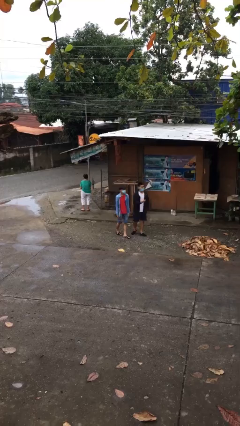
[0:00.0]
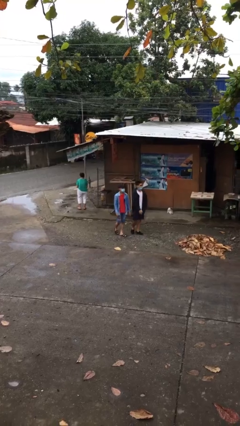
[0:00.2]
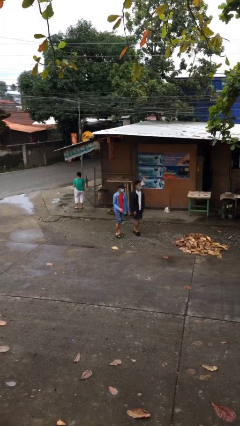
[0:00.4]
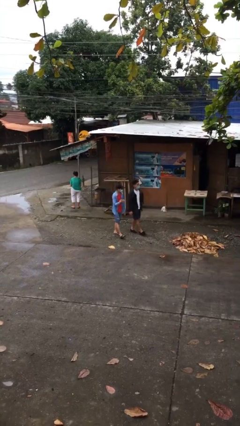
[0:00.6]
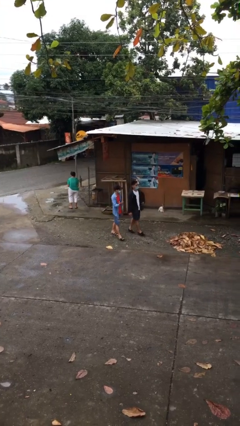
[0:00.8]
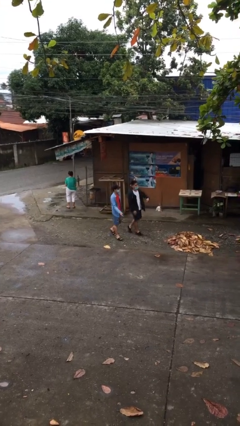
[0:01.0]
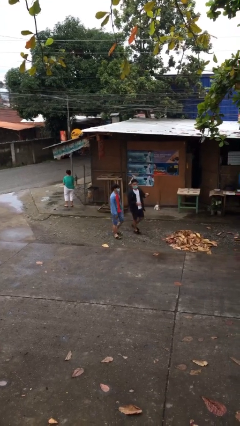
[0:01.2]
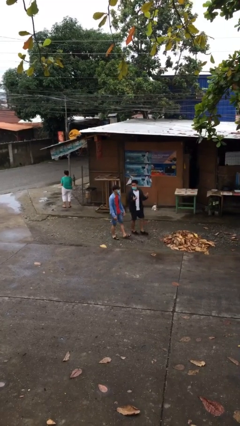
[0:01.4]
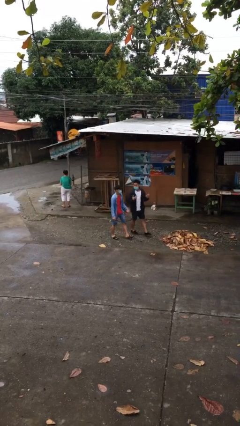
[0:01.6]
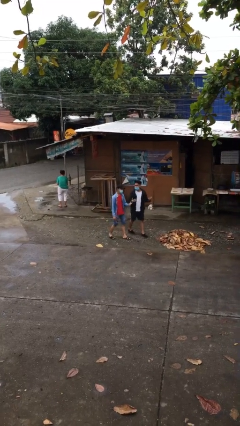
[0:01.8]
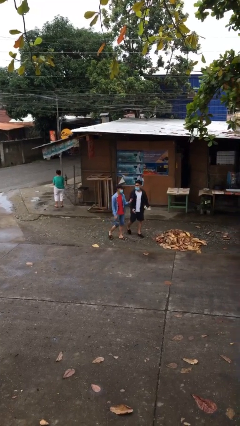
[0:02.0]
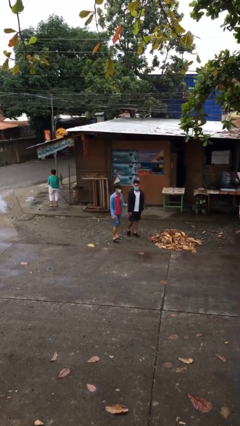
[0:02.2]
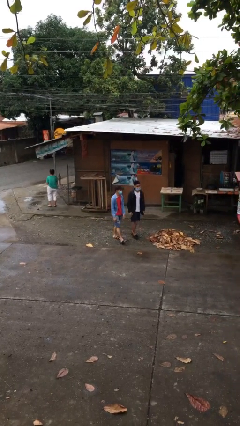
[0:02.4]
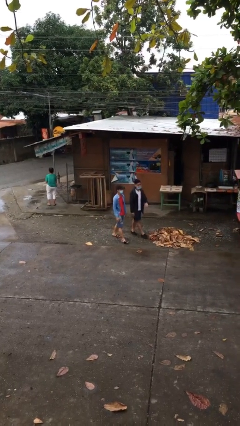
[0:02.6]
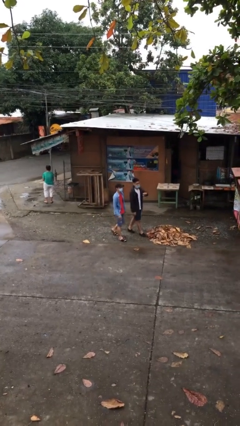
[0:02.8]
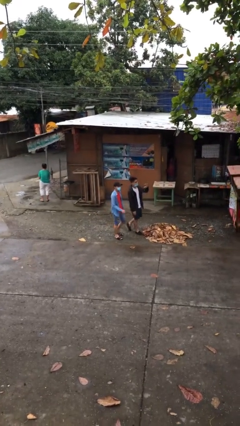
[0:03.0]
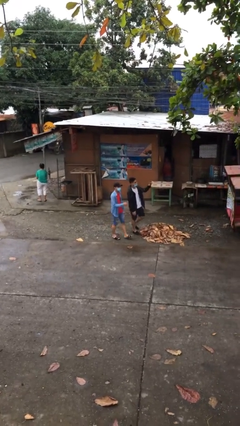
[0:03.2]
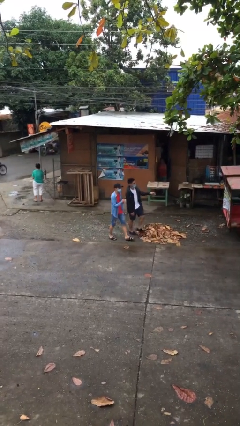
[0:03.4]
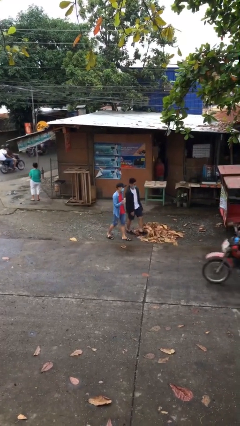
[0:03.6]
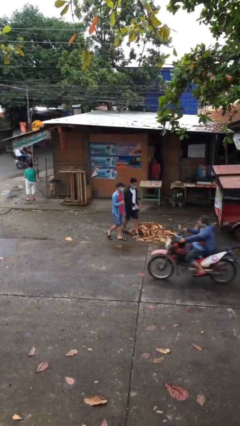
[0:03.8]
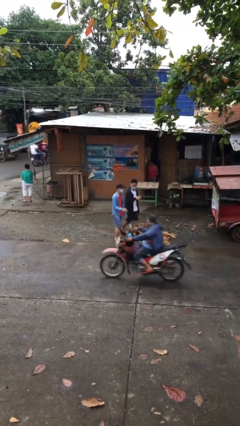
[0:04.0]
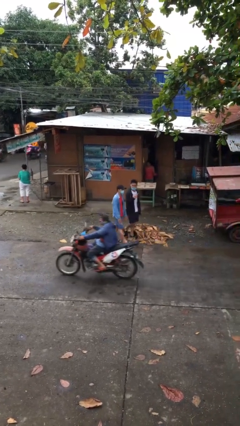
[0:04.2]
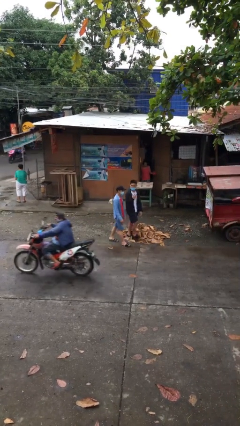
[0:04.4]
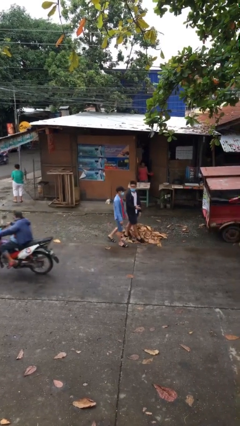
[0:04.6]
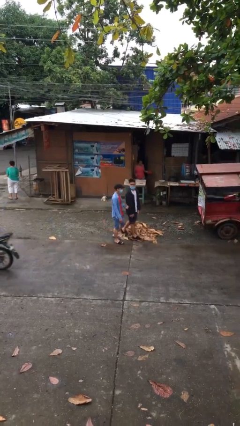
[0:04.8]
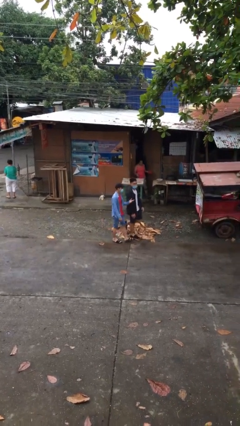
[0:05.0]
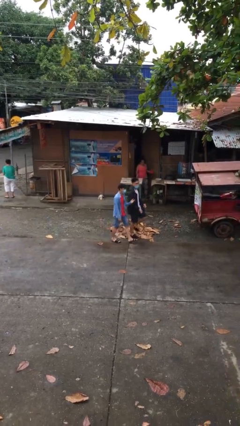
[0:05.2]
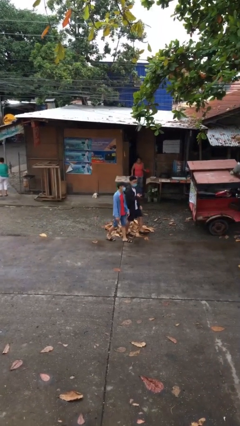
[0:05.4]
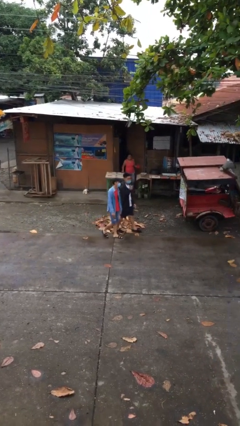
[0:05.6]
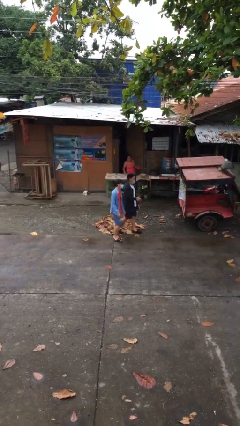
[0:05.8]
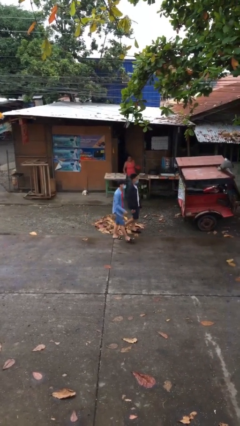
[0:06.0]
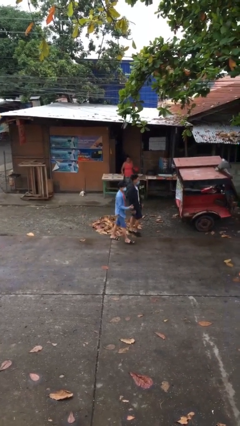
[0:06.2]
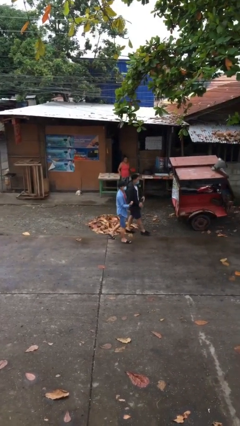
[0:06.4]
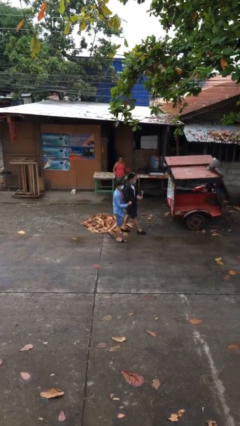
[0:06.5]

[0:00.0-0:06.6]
person talks to person

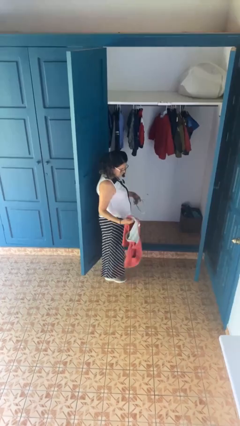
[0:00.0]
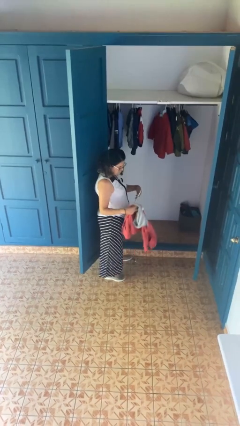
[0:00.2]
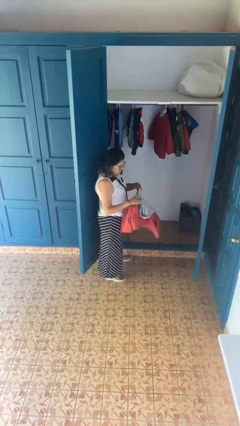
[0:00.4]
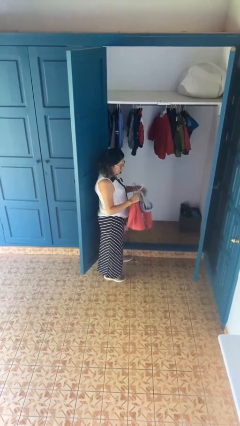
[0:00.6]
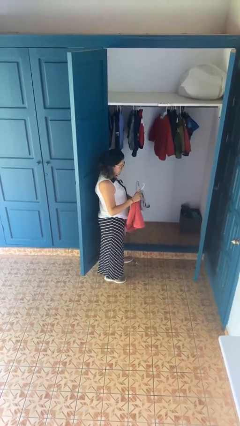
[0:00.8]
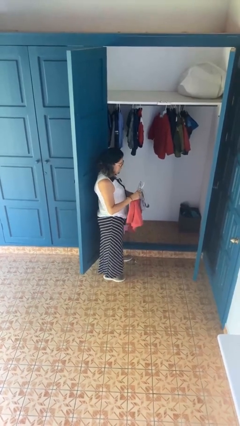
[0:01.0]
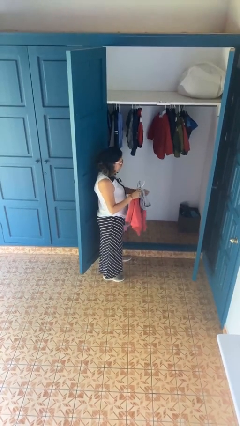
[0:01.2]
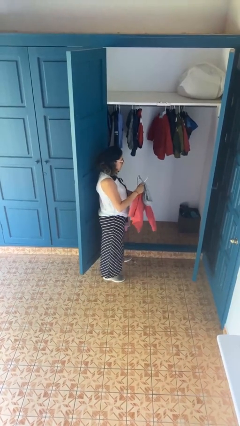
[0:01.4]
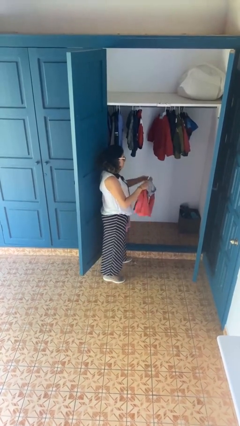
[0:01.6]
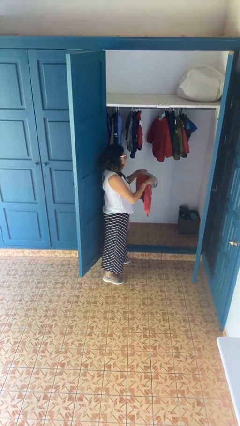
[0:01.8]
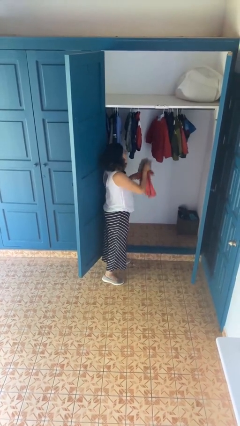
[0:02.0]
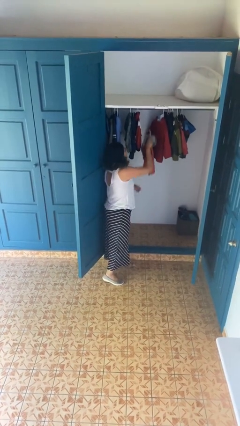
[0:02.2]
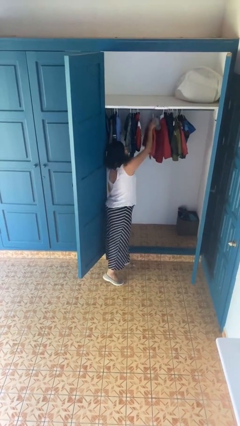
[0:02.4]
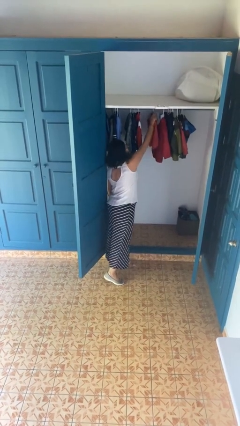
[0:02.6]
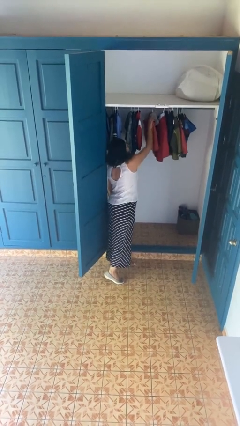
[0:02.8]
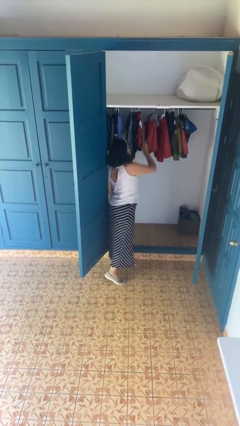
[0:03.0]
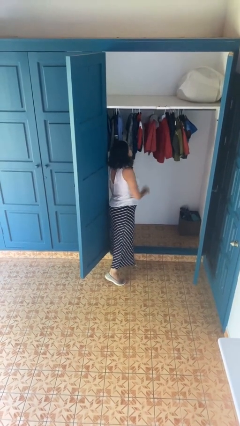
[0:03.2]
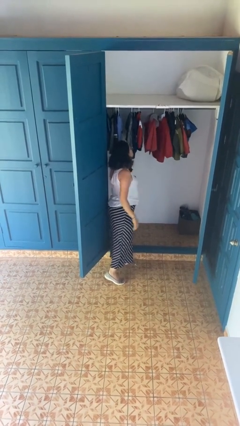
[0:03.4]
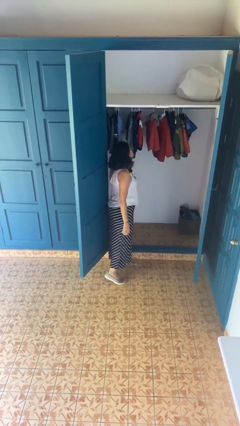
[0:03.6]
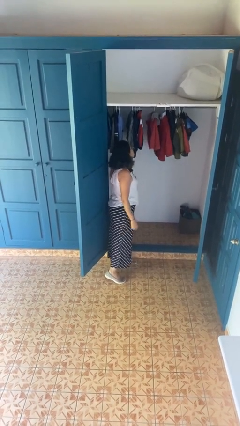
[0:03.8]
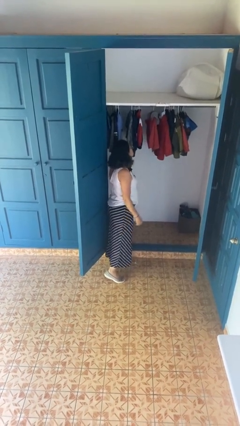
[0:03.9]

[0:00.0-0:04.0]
person puts clothes into closet

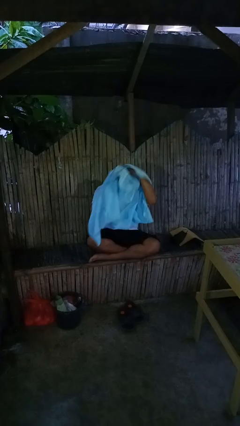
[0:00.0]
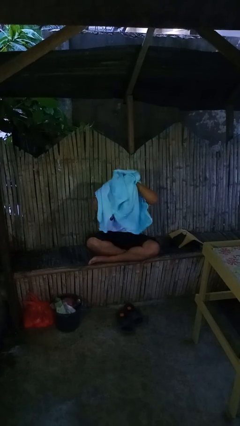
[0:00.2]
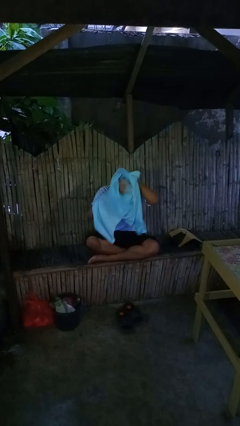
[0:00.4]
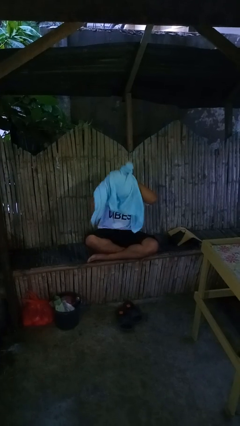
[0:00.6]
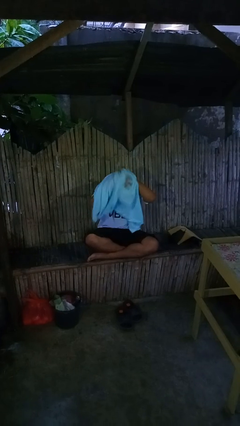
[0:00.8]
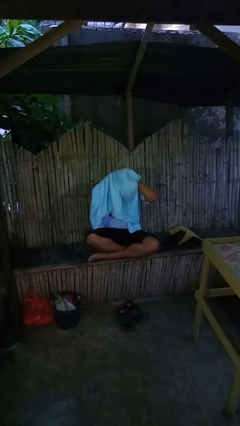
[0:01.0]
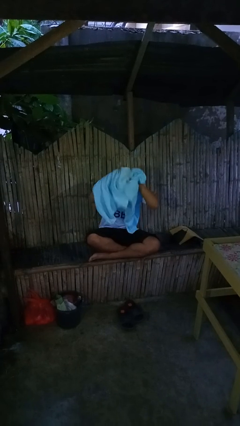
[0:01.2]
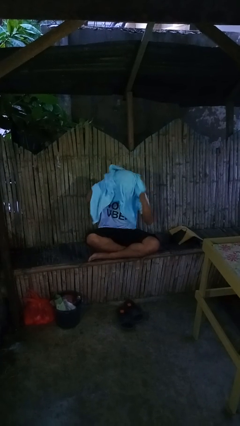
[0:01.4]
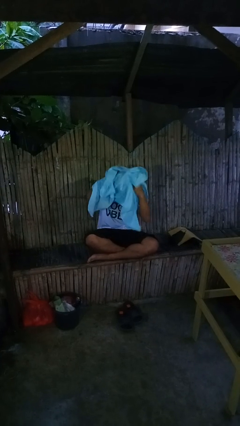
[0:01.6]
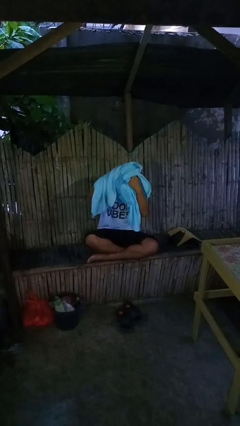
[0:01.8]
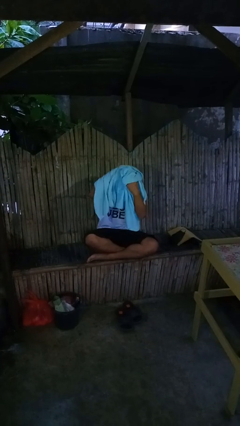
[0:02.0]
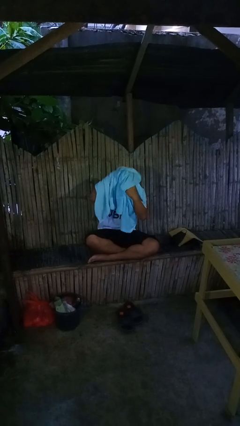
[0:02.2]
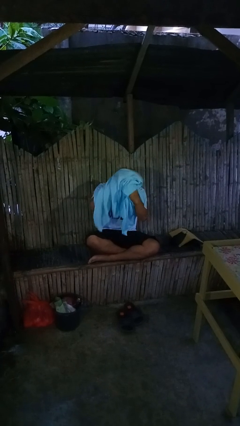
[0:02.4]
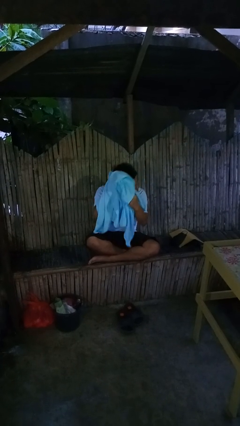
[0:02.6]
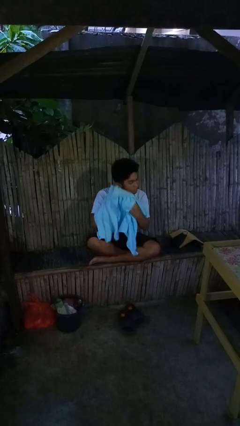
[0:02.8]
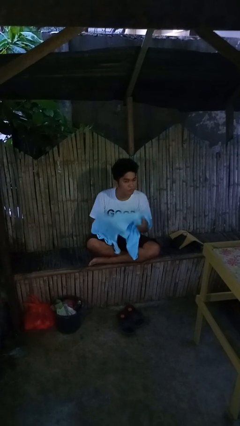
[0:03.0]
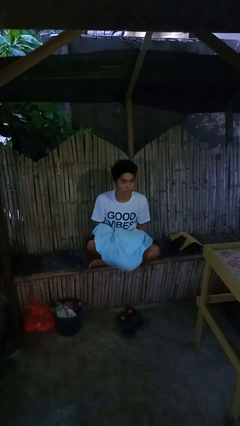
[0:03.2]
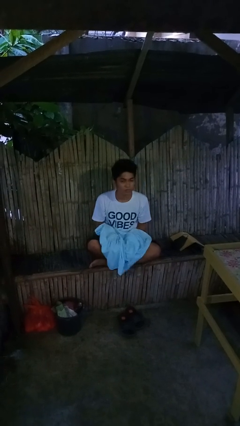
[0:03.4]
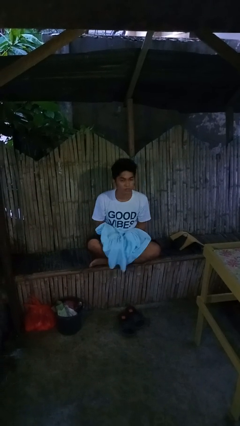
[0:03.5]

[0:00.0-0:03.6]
person dries hair with towel

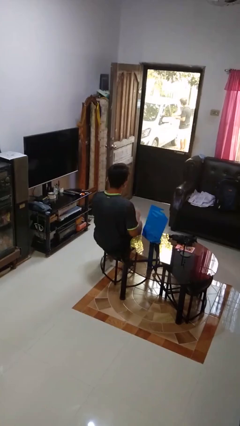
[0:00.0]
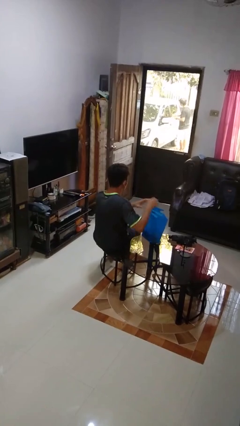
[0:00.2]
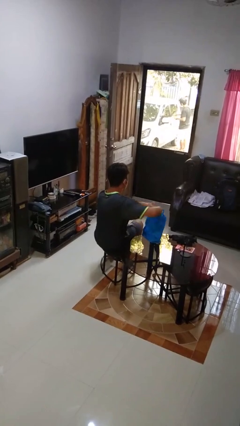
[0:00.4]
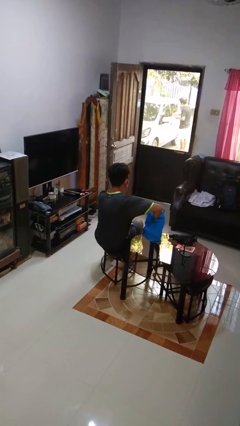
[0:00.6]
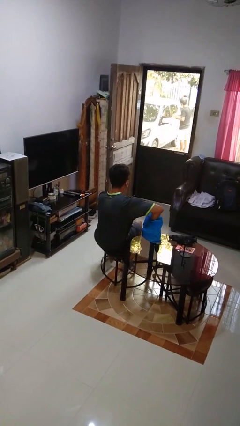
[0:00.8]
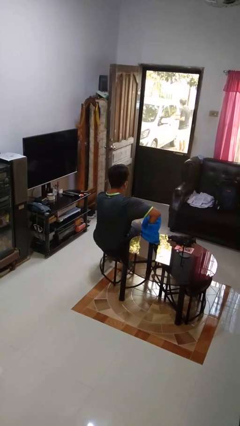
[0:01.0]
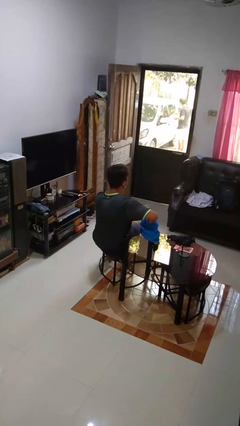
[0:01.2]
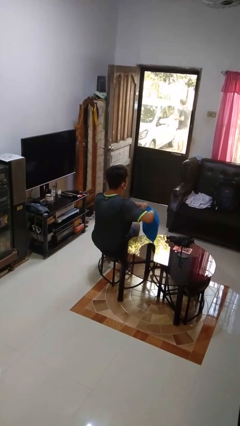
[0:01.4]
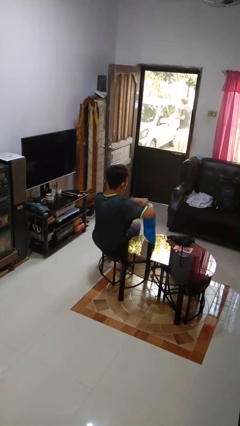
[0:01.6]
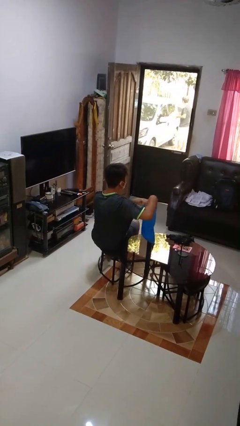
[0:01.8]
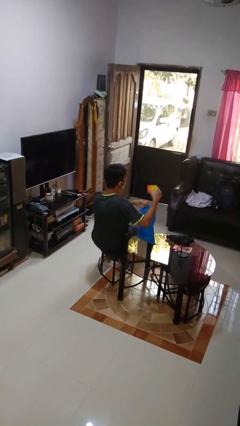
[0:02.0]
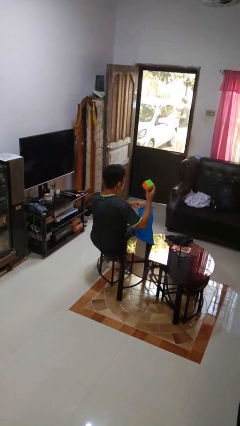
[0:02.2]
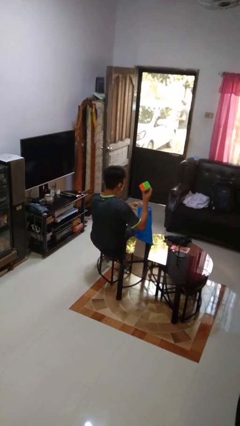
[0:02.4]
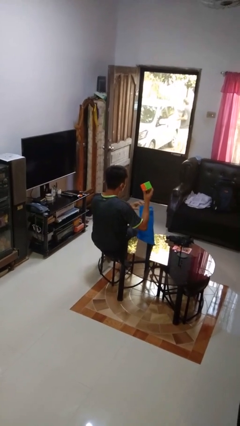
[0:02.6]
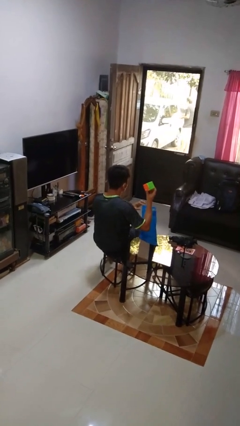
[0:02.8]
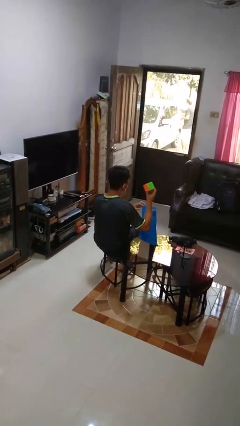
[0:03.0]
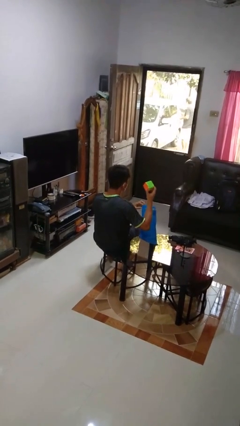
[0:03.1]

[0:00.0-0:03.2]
person takes object from bag
